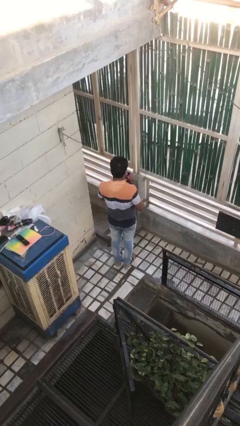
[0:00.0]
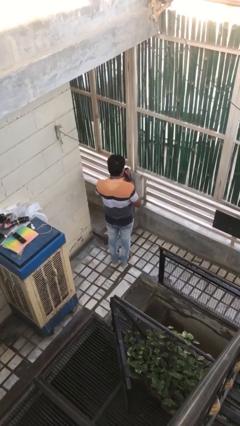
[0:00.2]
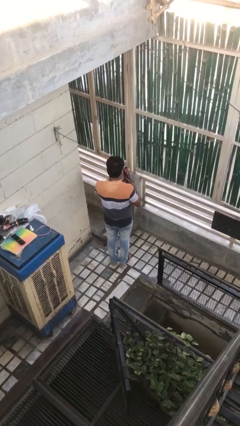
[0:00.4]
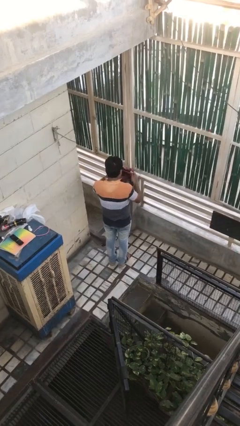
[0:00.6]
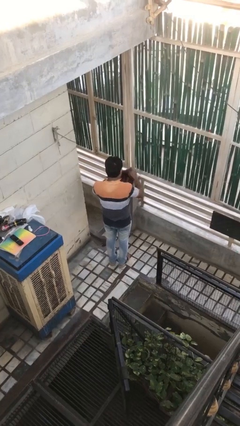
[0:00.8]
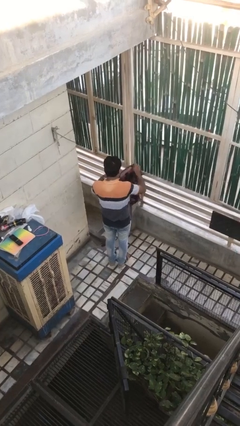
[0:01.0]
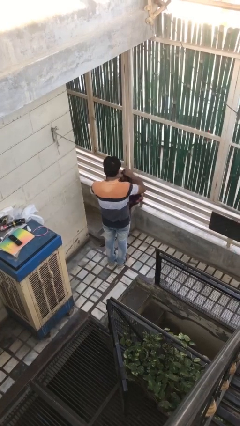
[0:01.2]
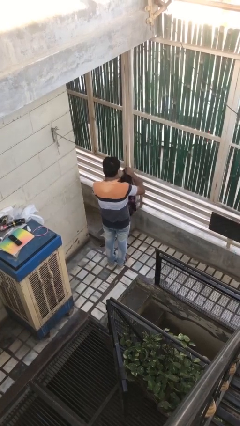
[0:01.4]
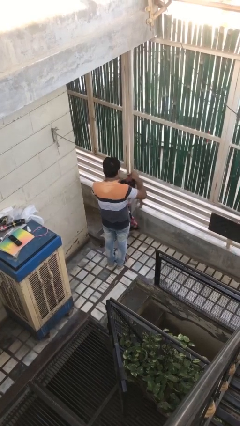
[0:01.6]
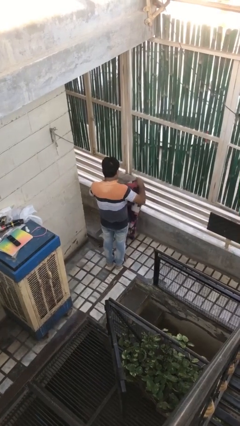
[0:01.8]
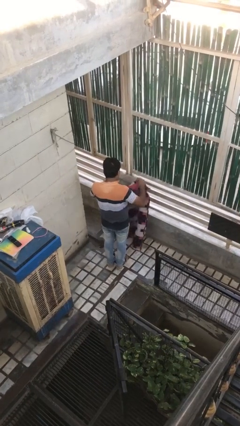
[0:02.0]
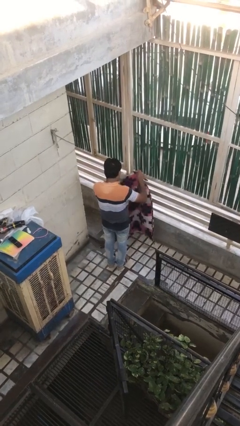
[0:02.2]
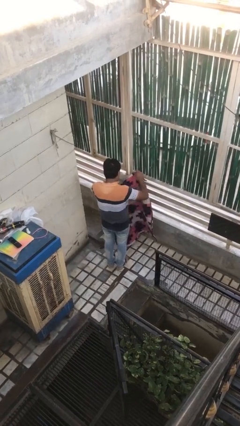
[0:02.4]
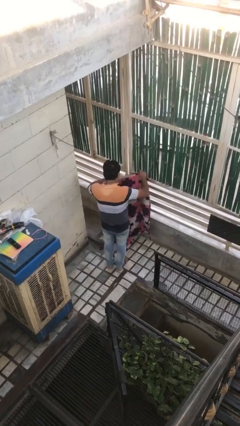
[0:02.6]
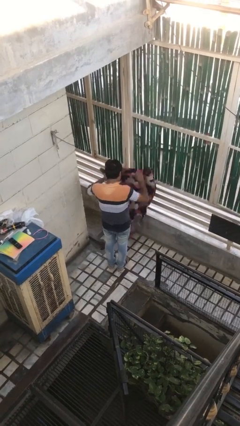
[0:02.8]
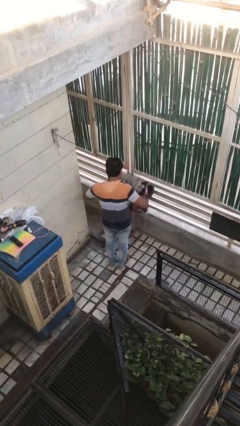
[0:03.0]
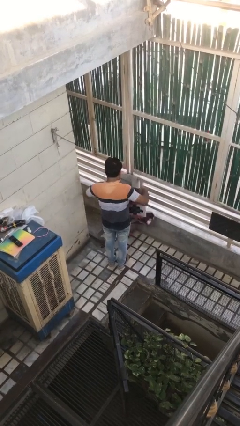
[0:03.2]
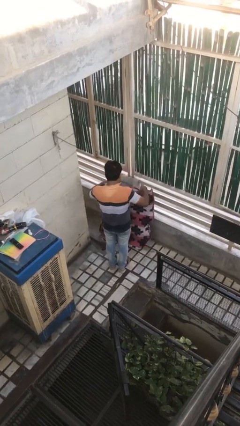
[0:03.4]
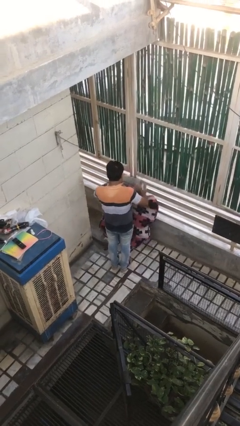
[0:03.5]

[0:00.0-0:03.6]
person unfolds blanket

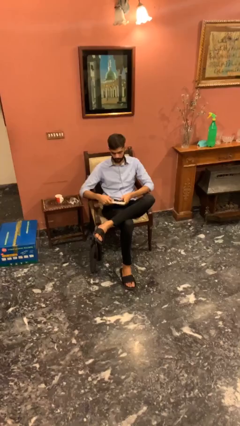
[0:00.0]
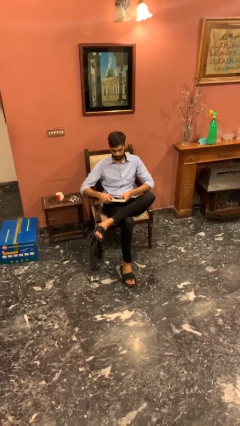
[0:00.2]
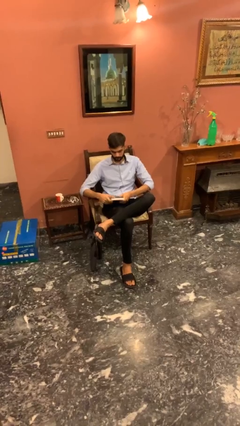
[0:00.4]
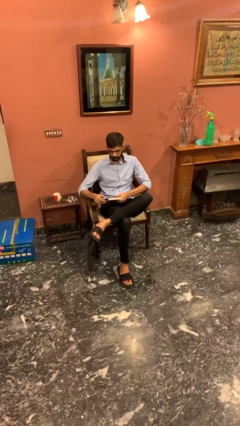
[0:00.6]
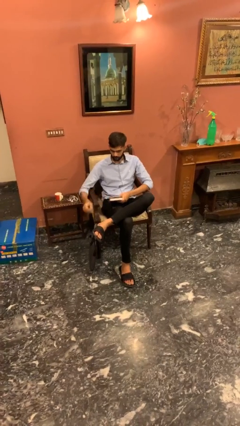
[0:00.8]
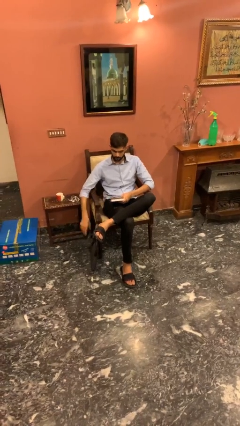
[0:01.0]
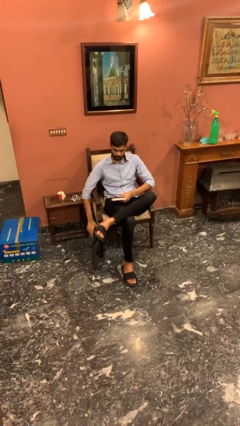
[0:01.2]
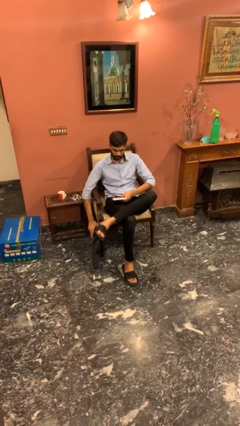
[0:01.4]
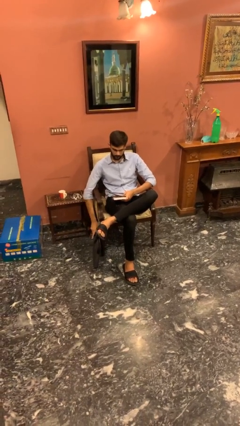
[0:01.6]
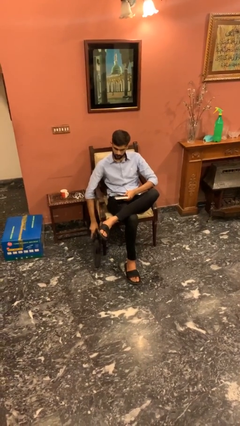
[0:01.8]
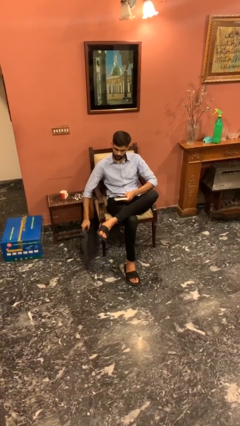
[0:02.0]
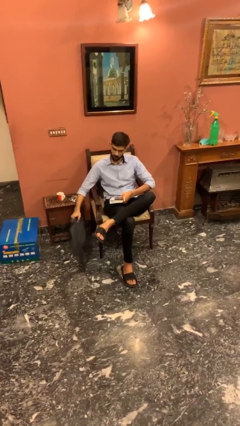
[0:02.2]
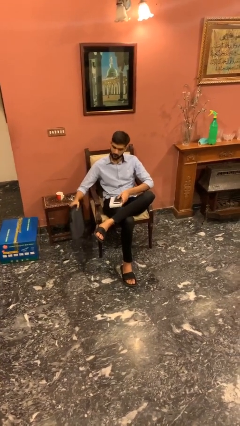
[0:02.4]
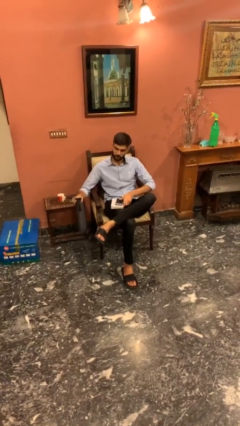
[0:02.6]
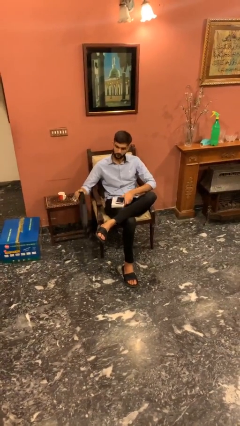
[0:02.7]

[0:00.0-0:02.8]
person picks up object from floor

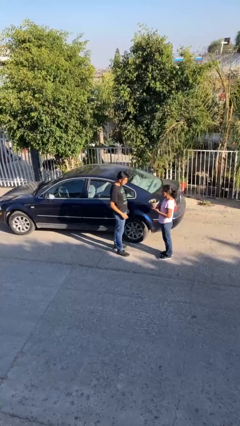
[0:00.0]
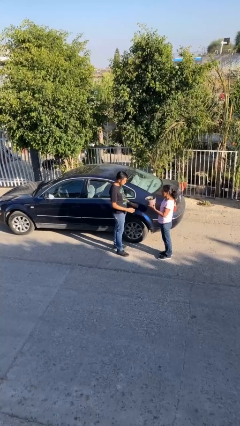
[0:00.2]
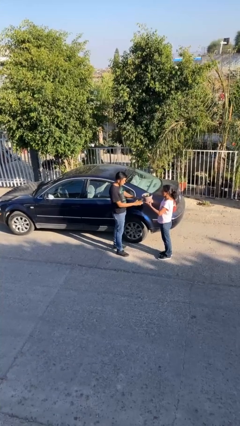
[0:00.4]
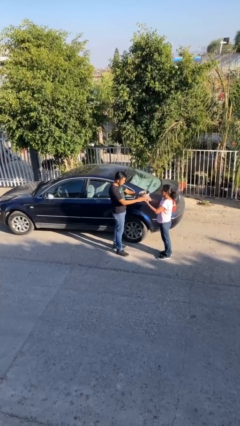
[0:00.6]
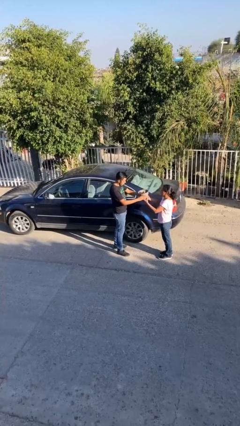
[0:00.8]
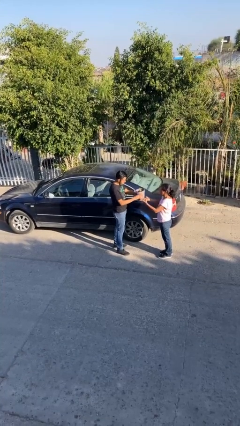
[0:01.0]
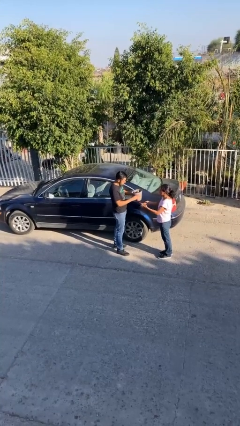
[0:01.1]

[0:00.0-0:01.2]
person transfers object to person

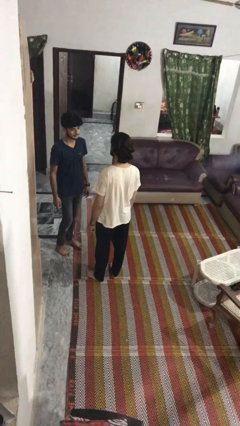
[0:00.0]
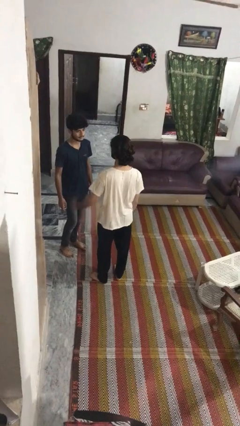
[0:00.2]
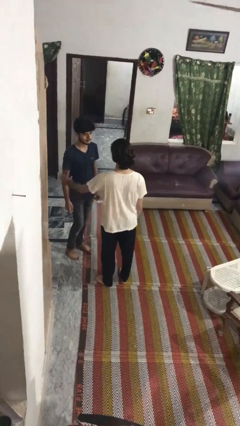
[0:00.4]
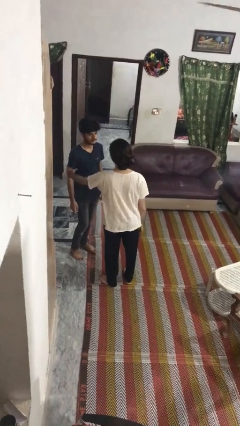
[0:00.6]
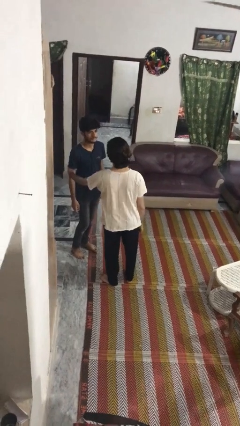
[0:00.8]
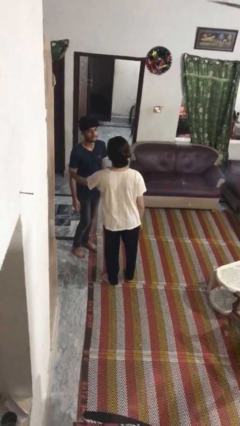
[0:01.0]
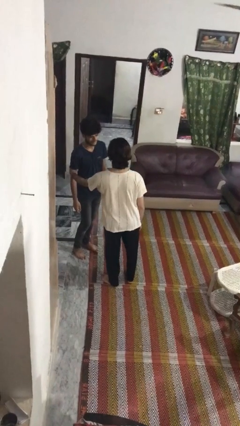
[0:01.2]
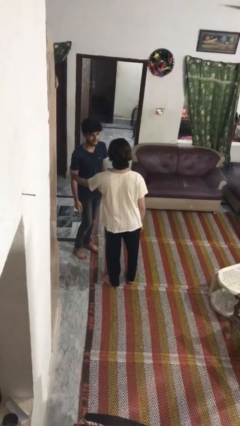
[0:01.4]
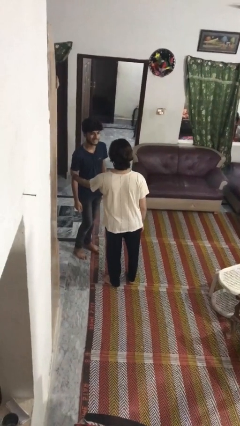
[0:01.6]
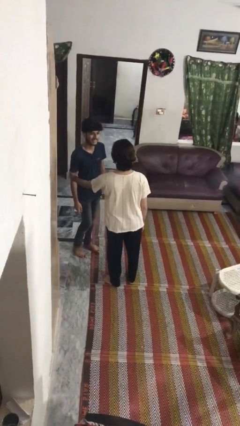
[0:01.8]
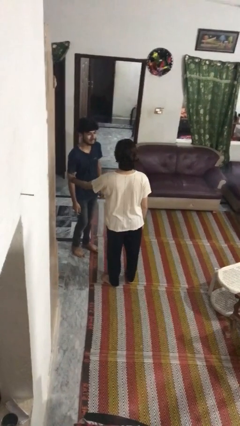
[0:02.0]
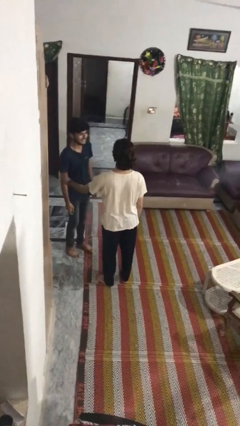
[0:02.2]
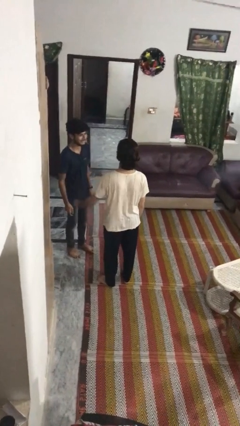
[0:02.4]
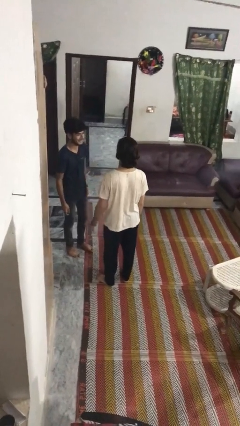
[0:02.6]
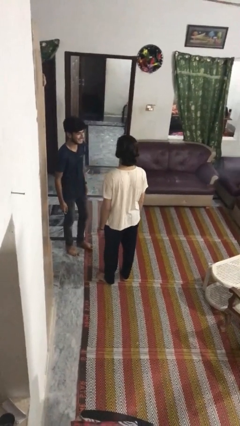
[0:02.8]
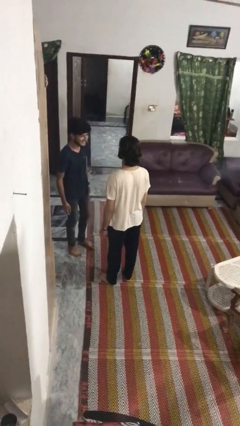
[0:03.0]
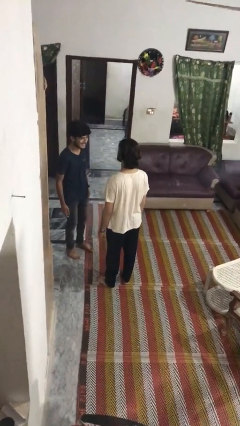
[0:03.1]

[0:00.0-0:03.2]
person grabs person by bicep

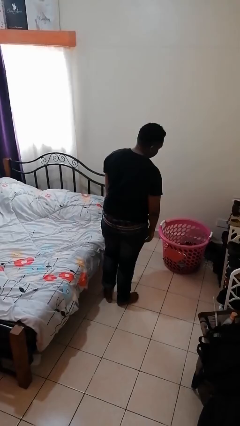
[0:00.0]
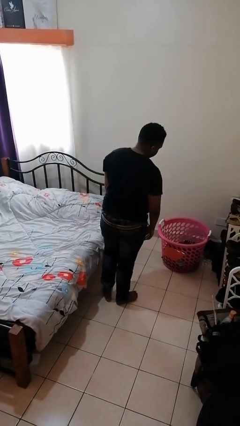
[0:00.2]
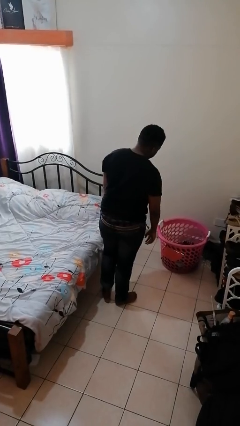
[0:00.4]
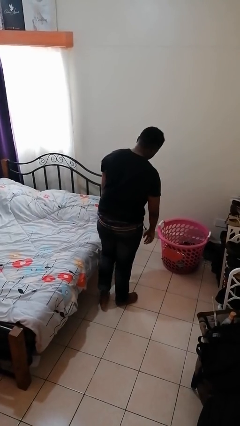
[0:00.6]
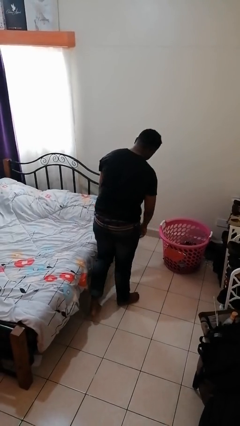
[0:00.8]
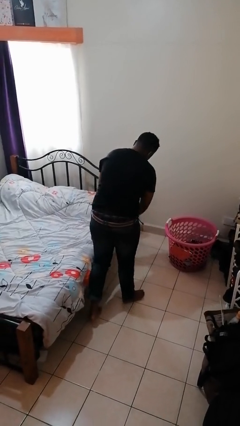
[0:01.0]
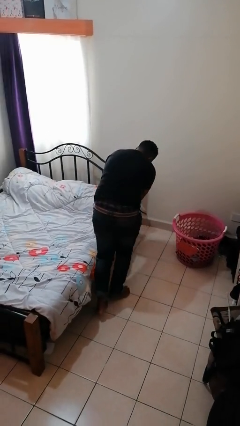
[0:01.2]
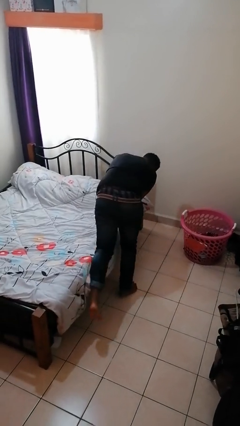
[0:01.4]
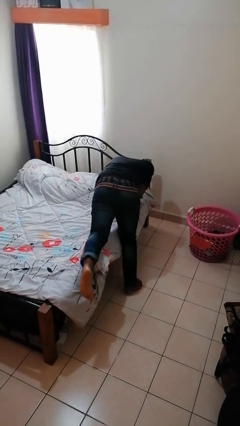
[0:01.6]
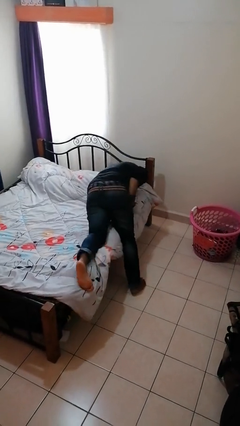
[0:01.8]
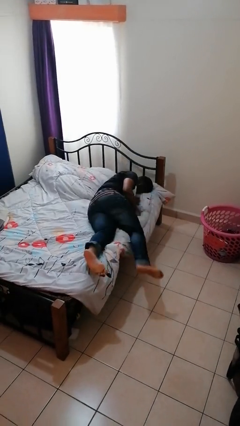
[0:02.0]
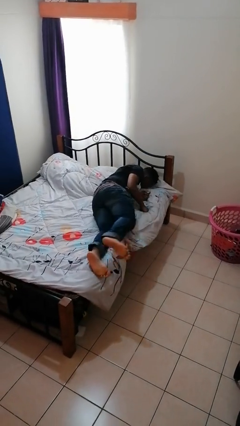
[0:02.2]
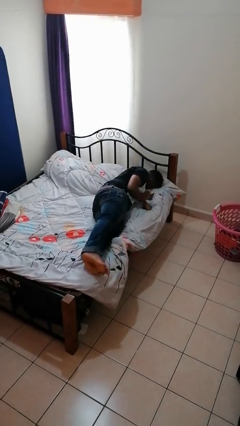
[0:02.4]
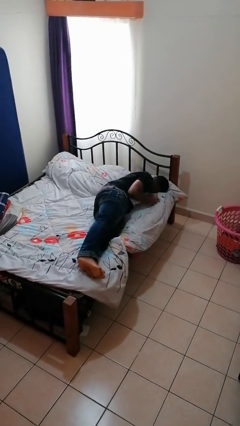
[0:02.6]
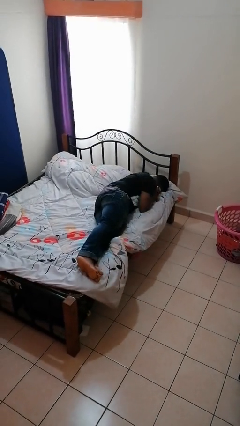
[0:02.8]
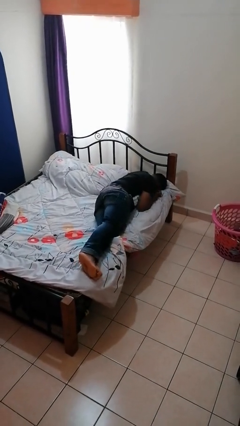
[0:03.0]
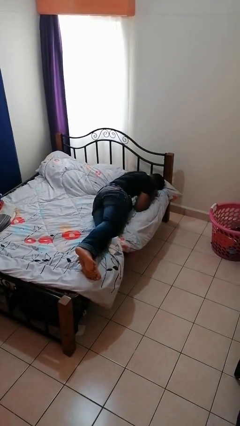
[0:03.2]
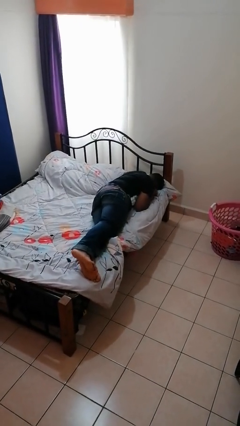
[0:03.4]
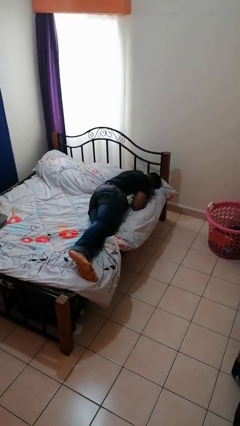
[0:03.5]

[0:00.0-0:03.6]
person lies down on bed

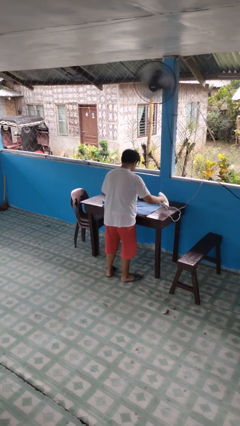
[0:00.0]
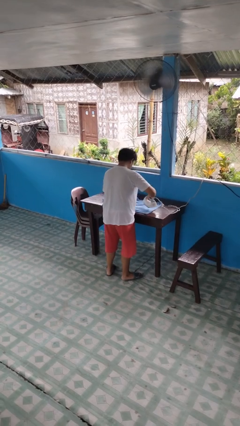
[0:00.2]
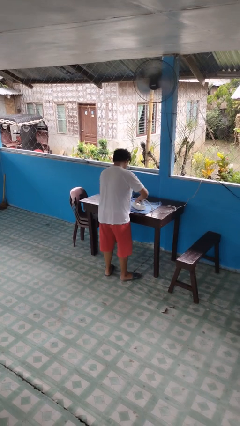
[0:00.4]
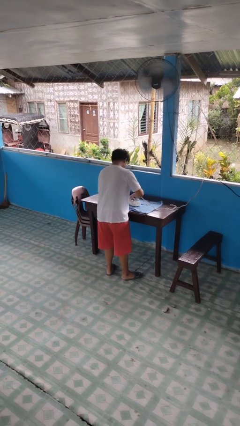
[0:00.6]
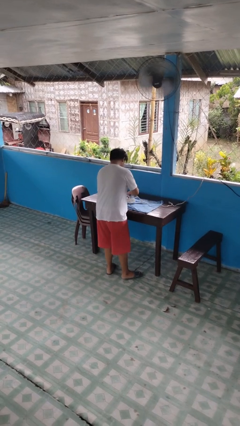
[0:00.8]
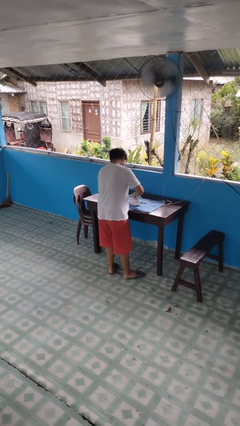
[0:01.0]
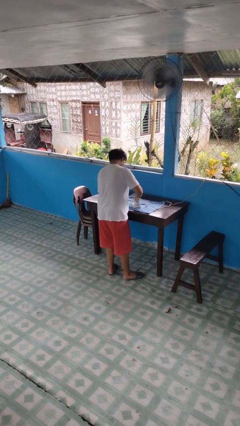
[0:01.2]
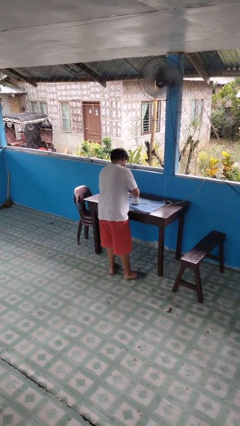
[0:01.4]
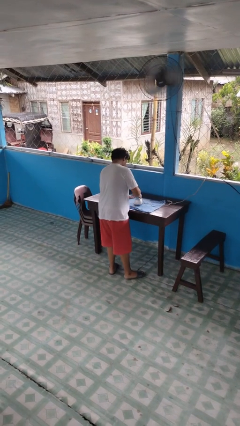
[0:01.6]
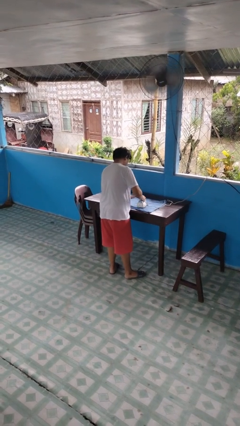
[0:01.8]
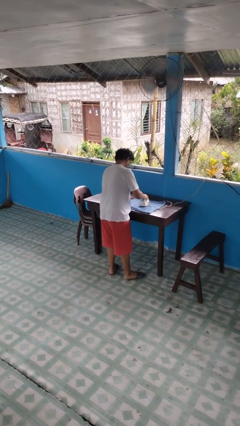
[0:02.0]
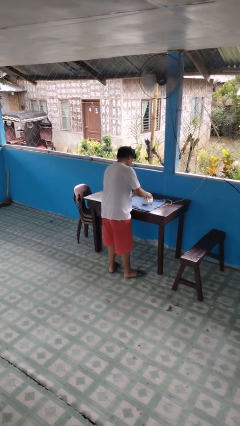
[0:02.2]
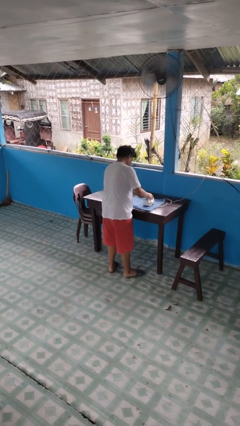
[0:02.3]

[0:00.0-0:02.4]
person irons clothes

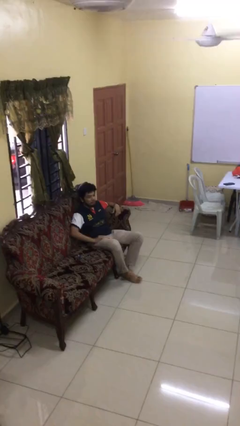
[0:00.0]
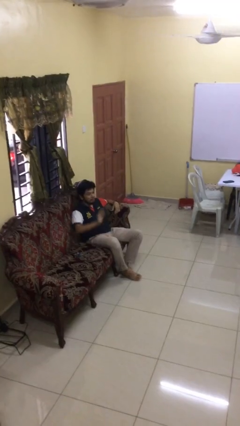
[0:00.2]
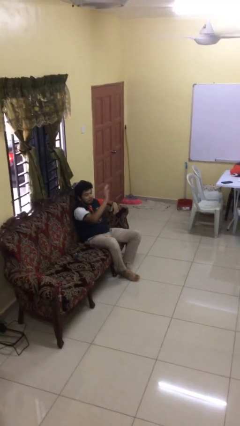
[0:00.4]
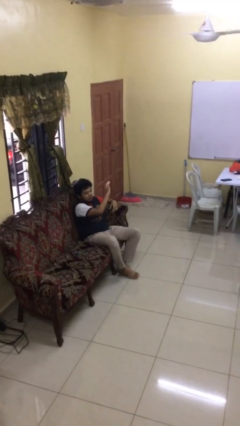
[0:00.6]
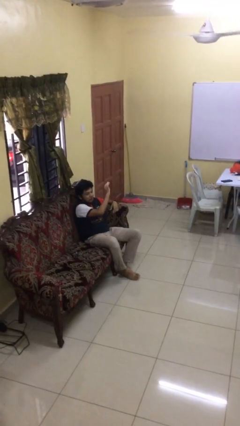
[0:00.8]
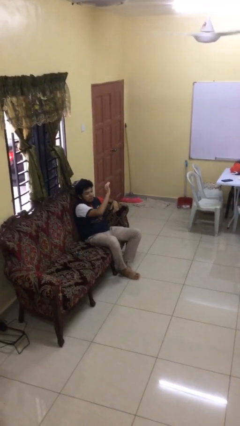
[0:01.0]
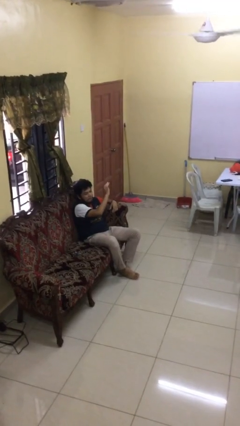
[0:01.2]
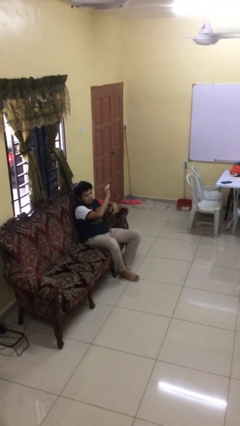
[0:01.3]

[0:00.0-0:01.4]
person gestures swipe left
